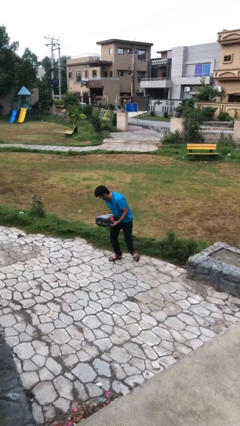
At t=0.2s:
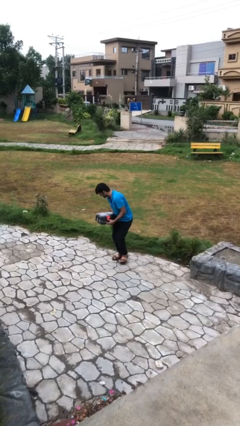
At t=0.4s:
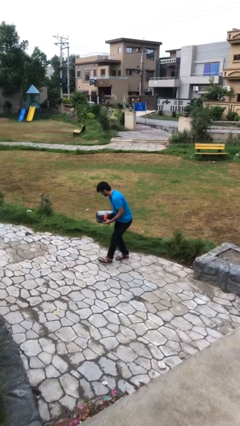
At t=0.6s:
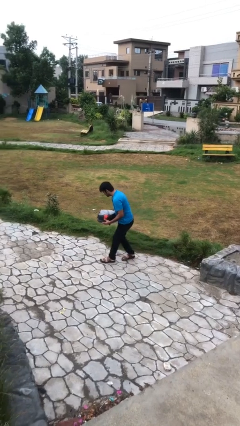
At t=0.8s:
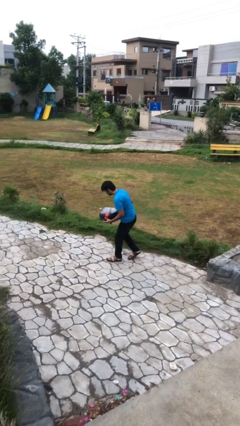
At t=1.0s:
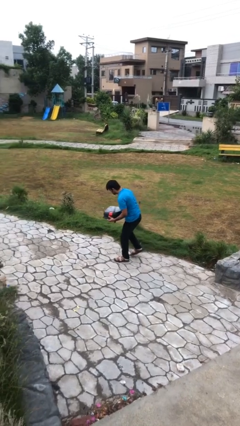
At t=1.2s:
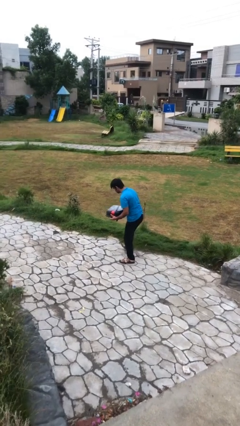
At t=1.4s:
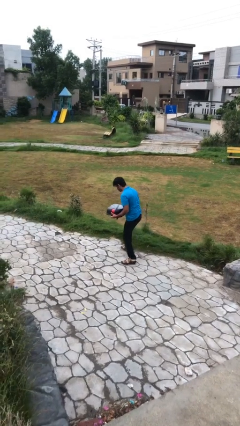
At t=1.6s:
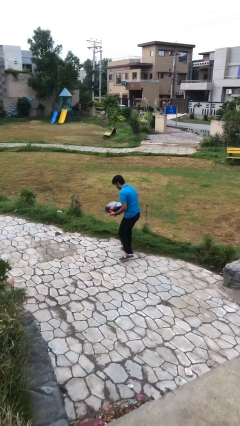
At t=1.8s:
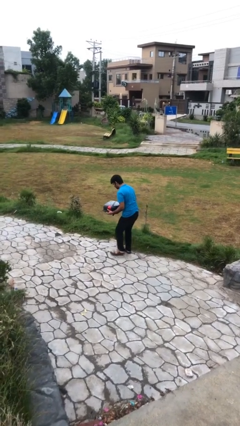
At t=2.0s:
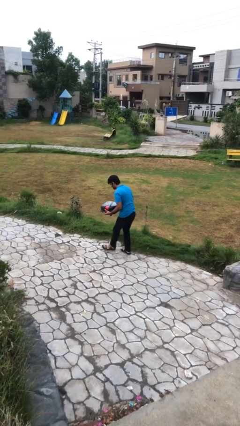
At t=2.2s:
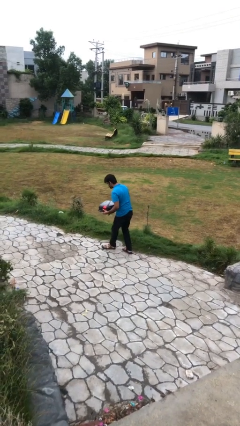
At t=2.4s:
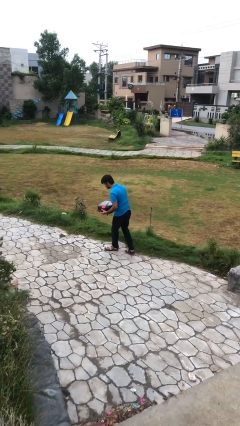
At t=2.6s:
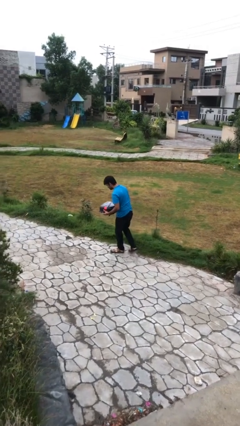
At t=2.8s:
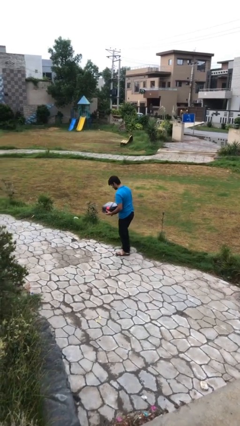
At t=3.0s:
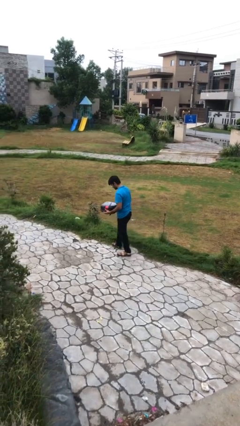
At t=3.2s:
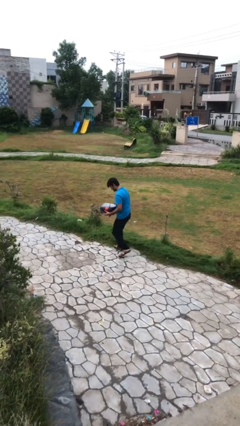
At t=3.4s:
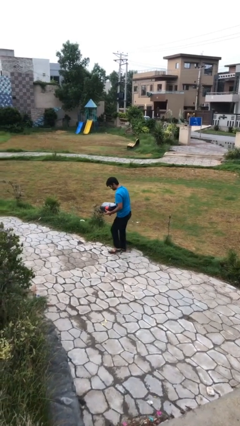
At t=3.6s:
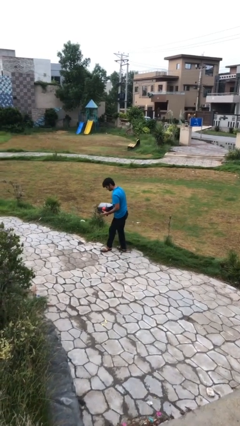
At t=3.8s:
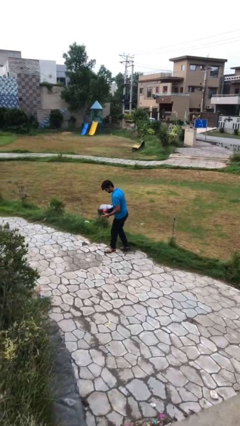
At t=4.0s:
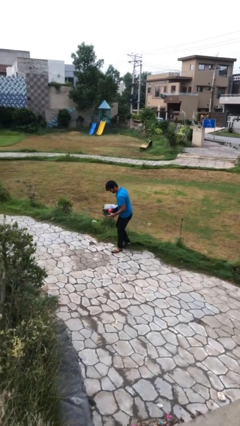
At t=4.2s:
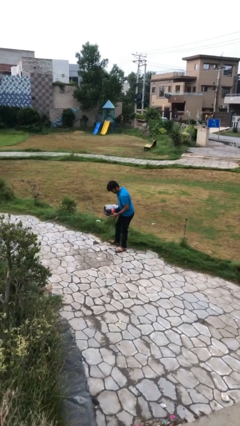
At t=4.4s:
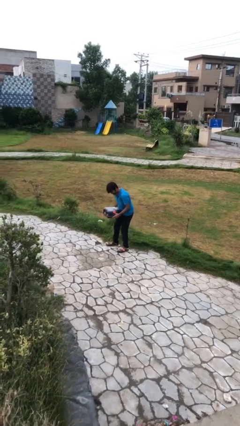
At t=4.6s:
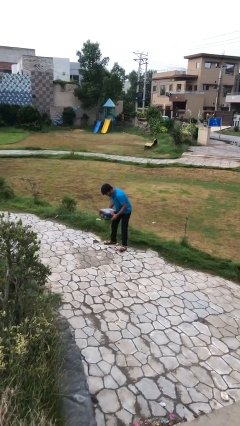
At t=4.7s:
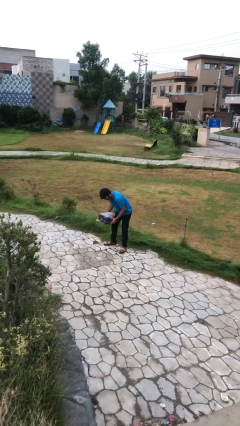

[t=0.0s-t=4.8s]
person carries heavy object

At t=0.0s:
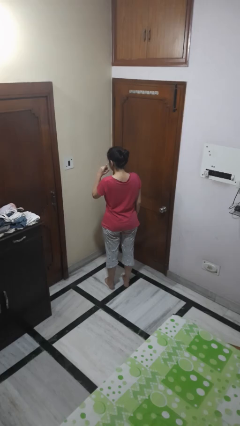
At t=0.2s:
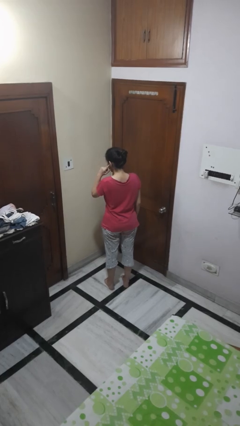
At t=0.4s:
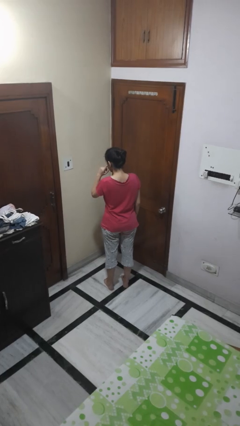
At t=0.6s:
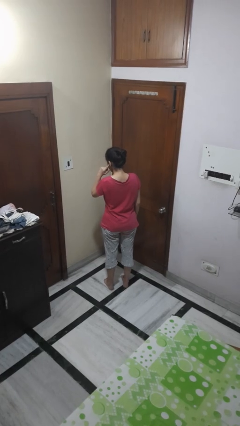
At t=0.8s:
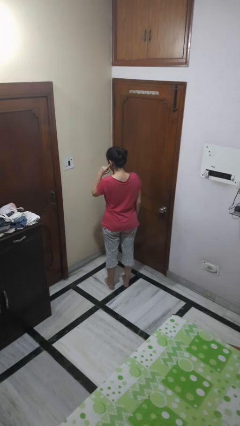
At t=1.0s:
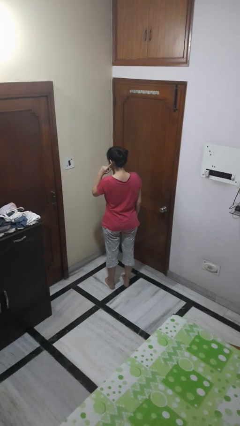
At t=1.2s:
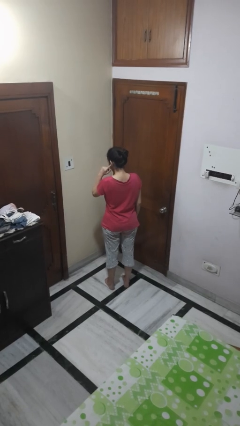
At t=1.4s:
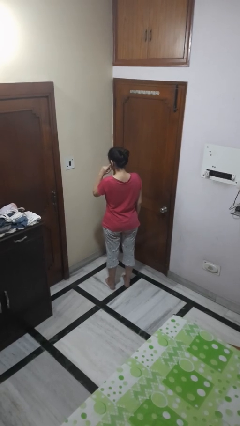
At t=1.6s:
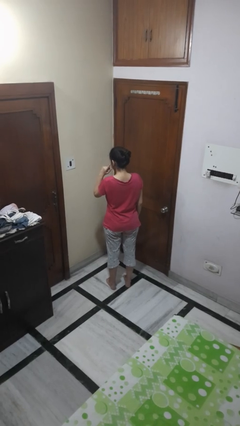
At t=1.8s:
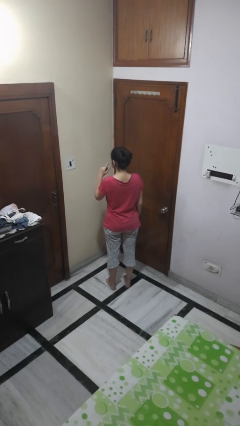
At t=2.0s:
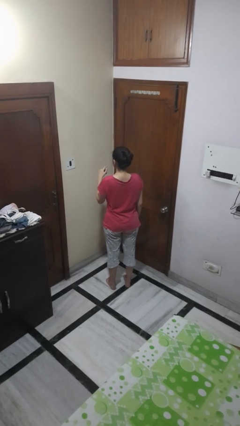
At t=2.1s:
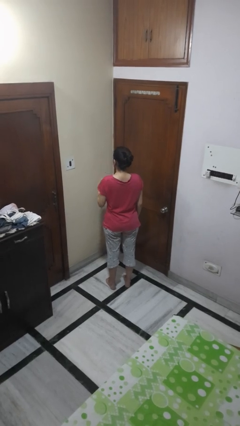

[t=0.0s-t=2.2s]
person gestures listen closely

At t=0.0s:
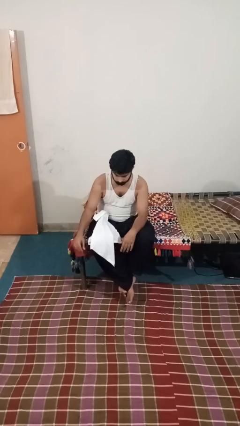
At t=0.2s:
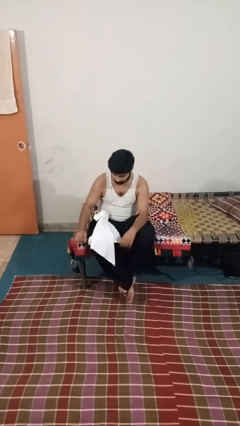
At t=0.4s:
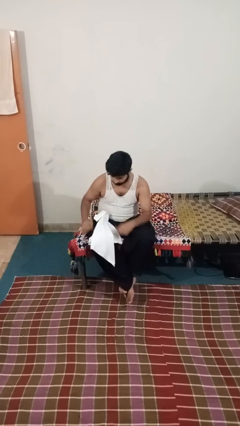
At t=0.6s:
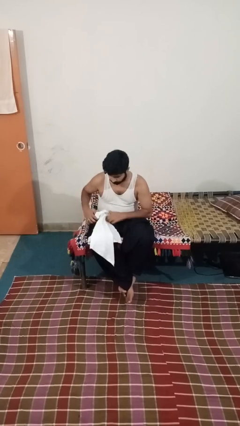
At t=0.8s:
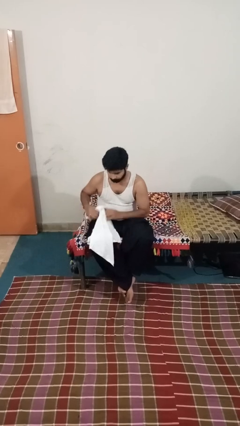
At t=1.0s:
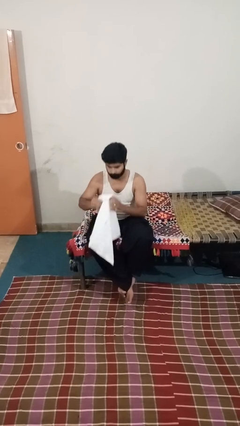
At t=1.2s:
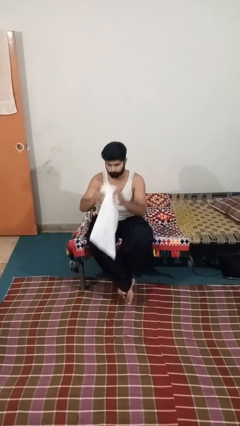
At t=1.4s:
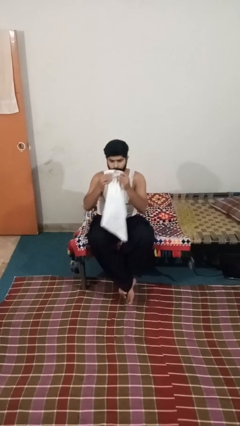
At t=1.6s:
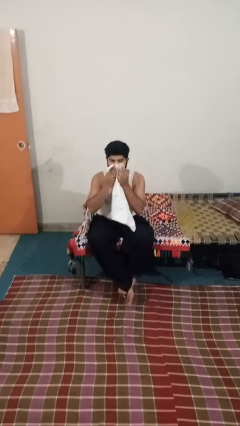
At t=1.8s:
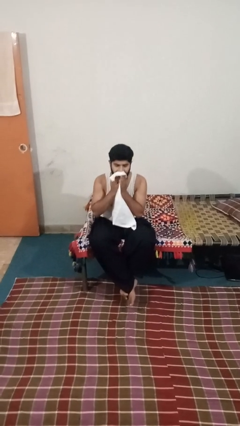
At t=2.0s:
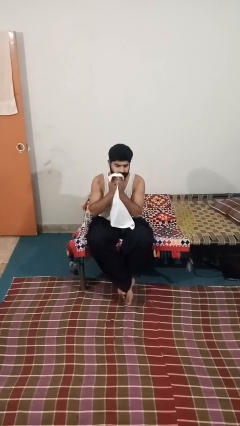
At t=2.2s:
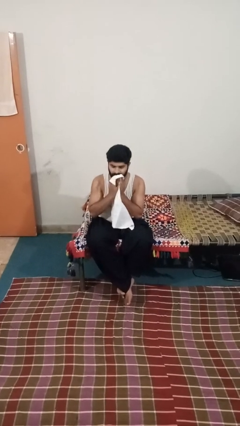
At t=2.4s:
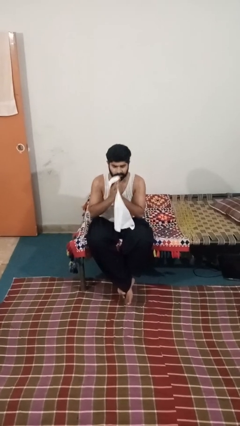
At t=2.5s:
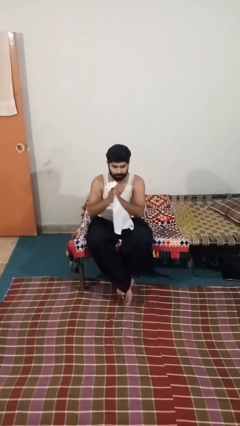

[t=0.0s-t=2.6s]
person wipes mouth with napkin

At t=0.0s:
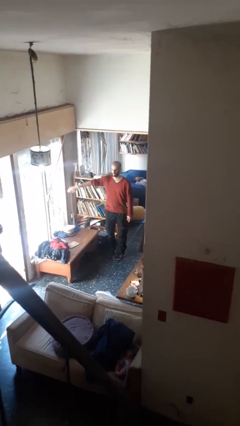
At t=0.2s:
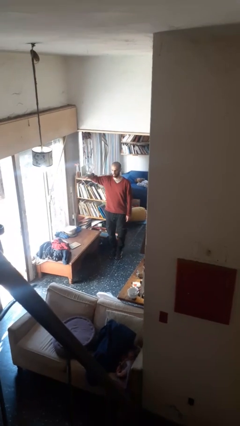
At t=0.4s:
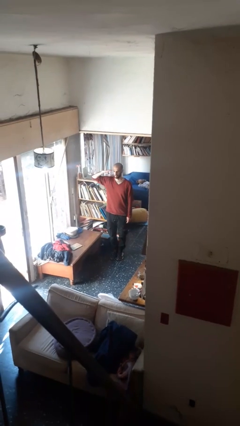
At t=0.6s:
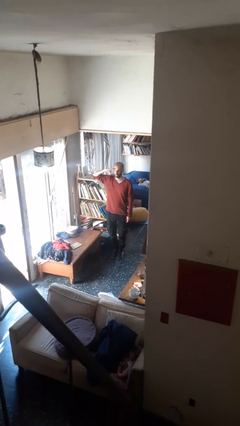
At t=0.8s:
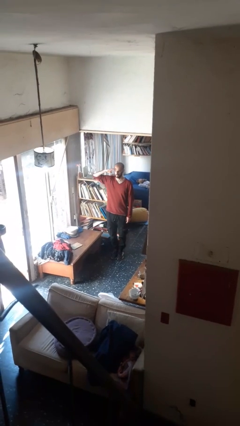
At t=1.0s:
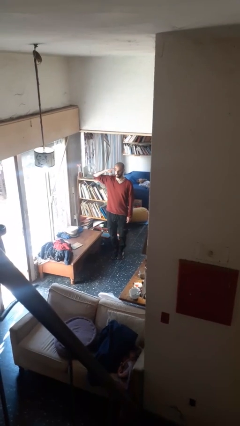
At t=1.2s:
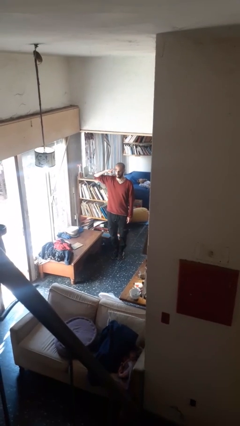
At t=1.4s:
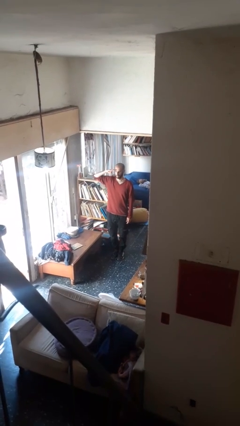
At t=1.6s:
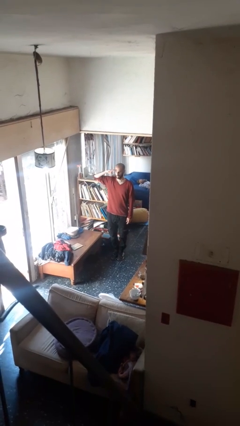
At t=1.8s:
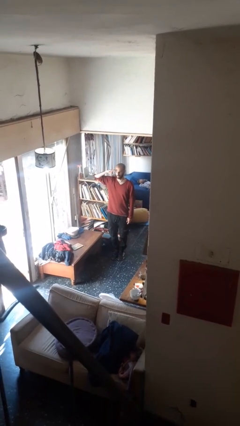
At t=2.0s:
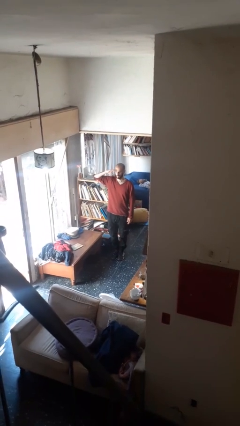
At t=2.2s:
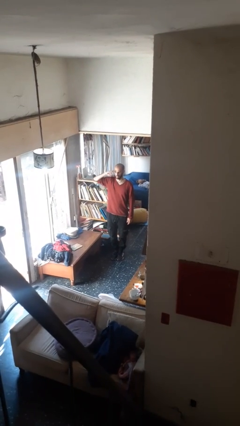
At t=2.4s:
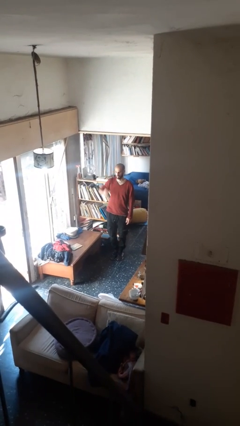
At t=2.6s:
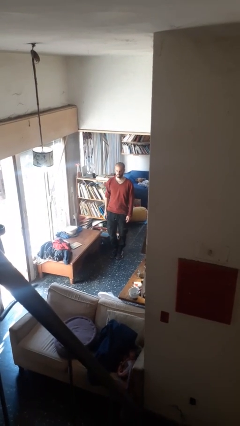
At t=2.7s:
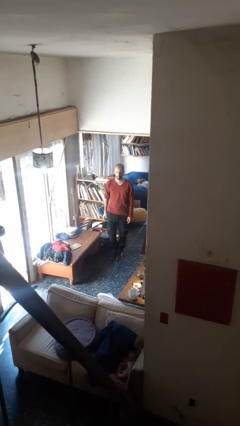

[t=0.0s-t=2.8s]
person salutes

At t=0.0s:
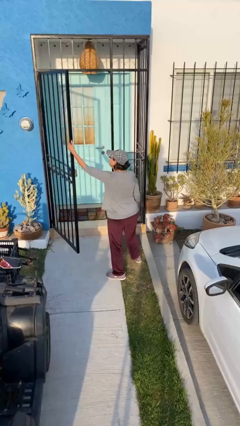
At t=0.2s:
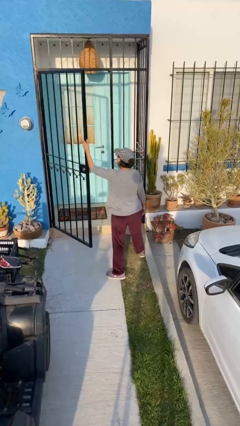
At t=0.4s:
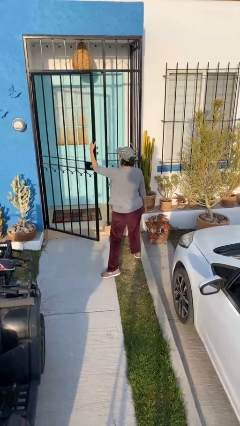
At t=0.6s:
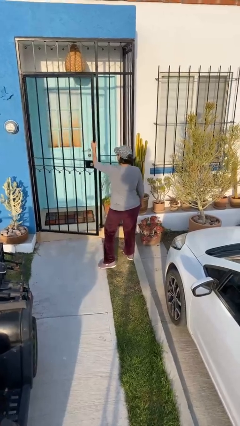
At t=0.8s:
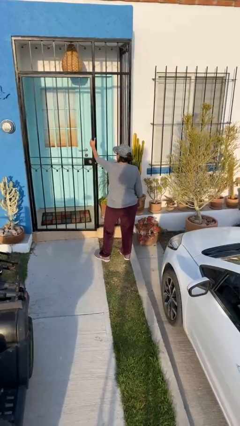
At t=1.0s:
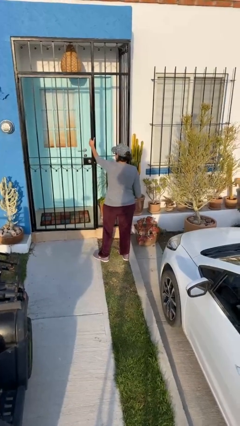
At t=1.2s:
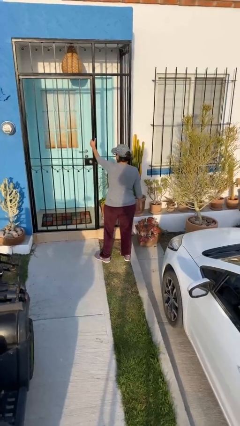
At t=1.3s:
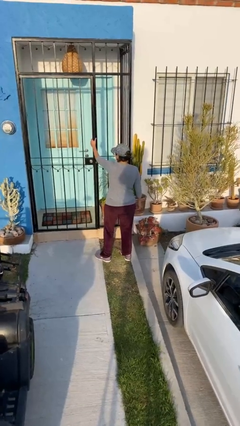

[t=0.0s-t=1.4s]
person closes facility door

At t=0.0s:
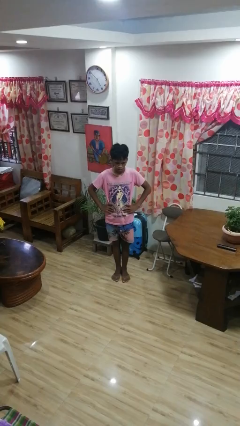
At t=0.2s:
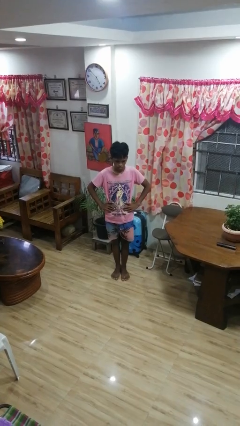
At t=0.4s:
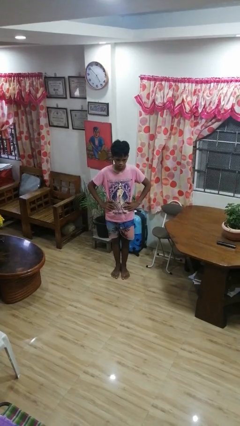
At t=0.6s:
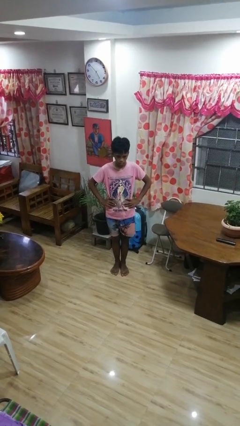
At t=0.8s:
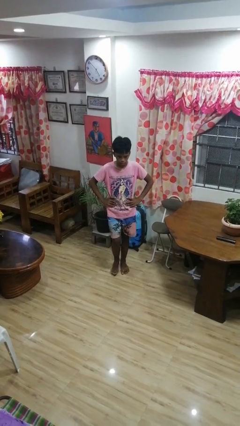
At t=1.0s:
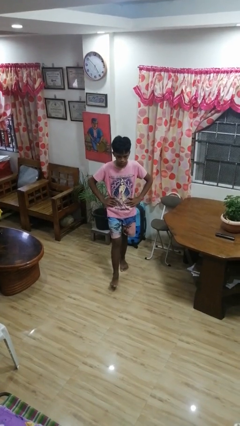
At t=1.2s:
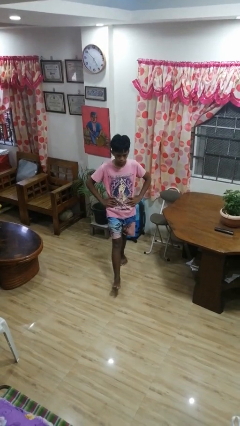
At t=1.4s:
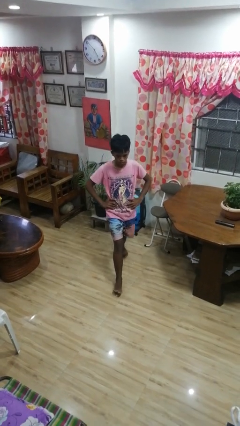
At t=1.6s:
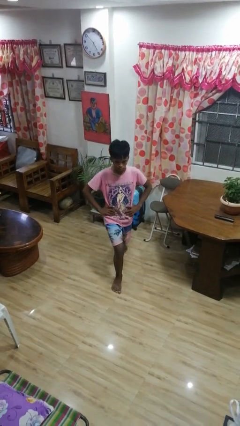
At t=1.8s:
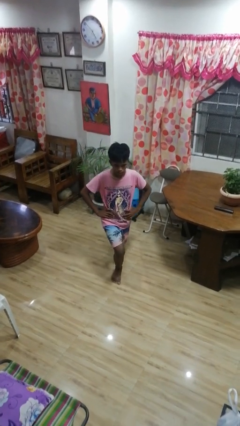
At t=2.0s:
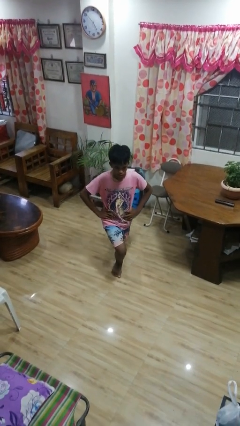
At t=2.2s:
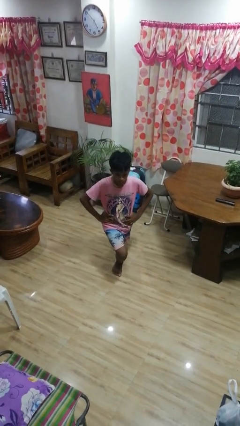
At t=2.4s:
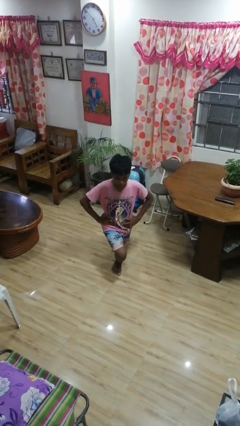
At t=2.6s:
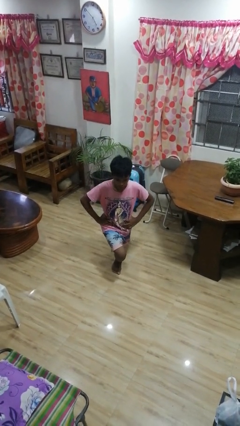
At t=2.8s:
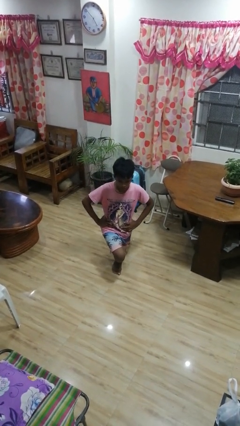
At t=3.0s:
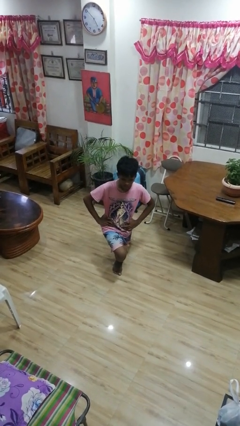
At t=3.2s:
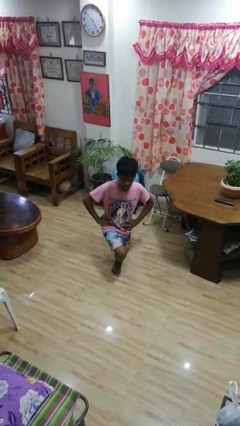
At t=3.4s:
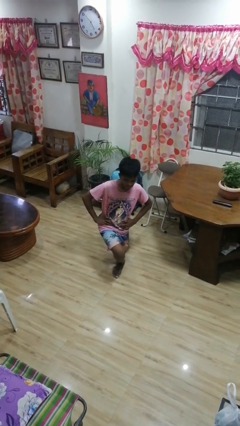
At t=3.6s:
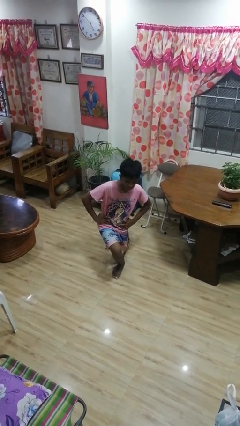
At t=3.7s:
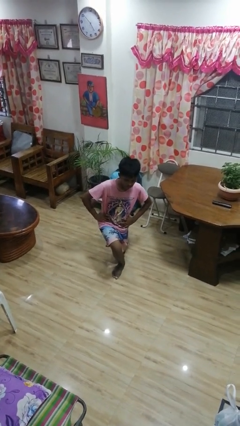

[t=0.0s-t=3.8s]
person exercises with lunges
